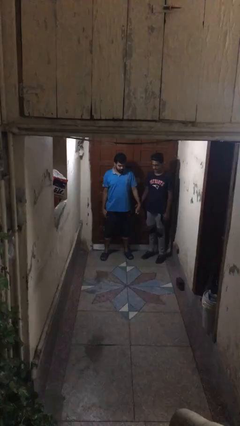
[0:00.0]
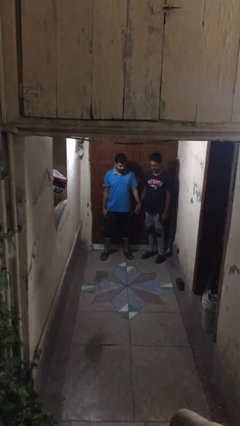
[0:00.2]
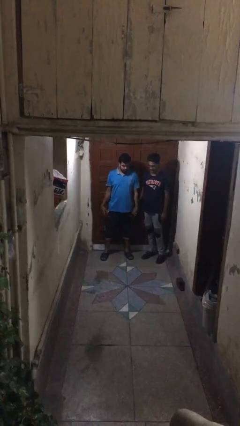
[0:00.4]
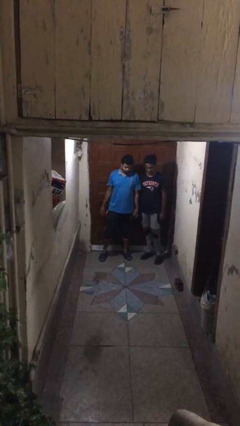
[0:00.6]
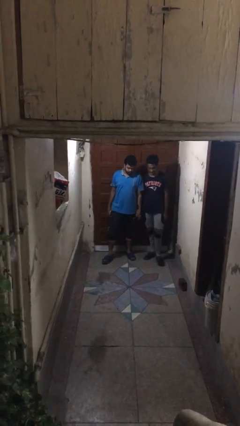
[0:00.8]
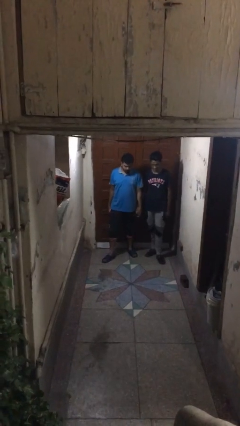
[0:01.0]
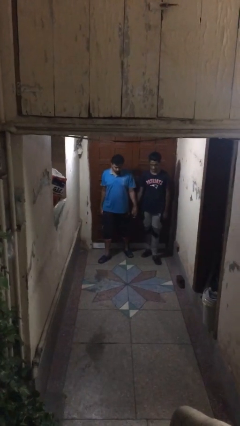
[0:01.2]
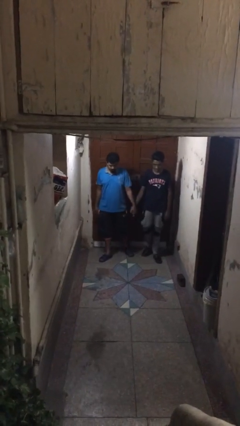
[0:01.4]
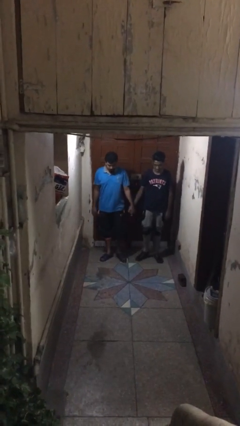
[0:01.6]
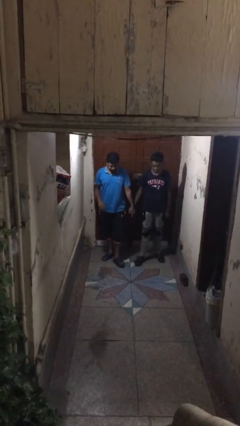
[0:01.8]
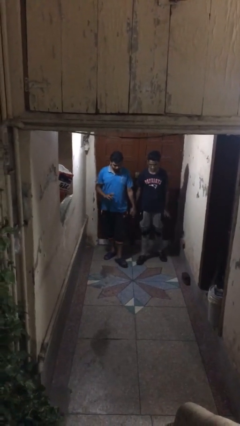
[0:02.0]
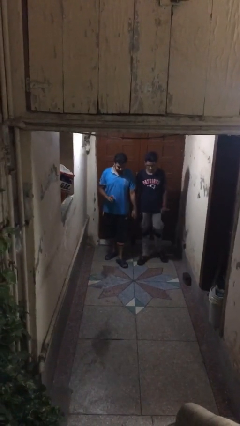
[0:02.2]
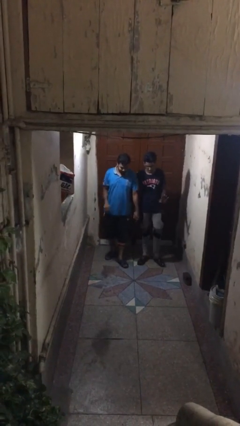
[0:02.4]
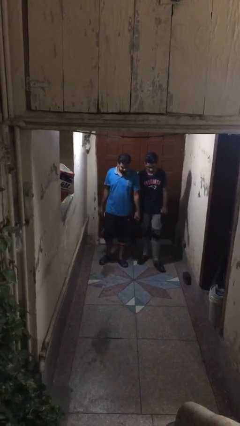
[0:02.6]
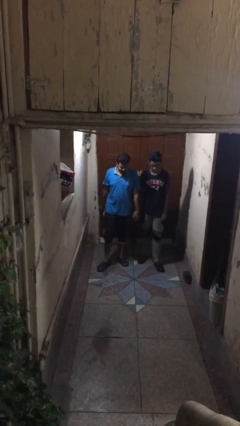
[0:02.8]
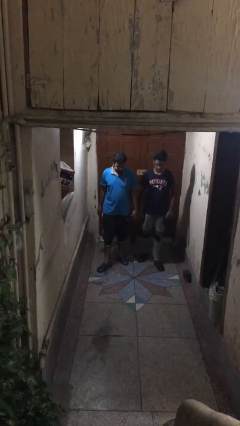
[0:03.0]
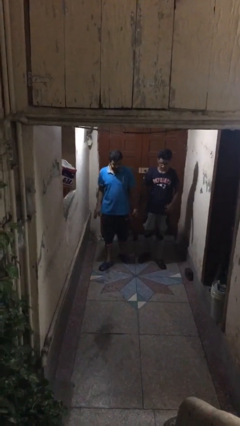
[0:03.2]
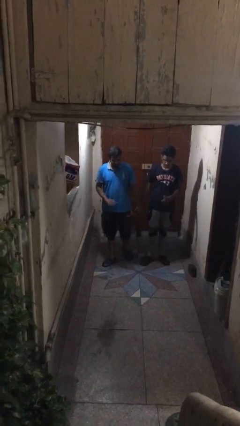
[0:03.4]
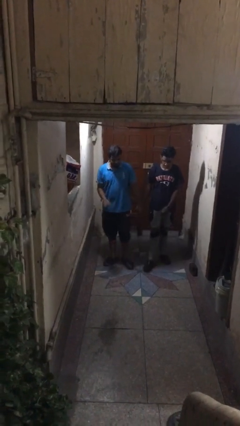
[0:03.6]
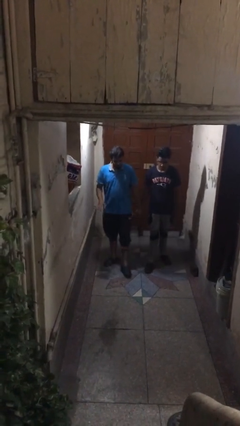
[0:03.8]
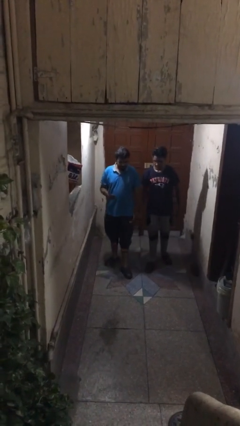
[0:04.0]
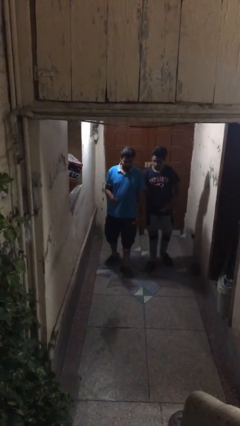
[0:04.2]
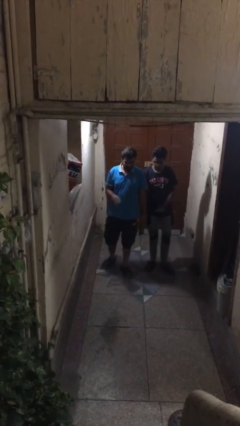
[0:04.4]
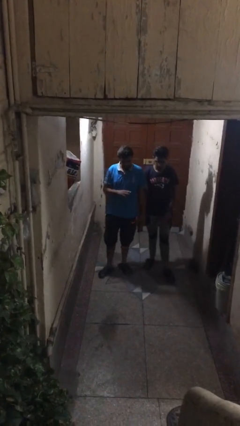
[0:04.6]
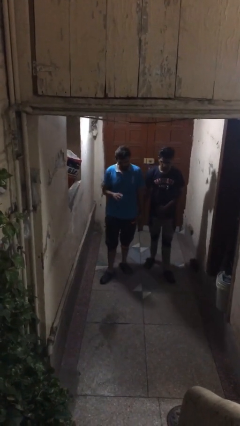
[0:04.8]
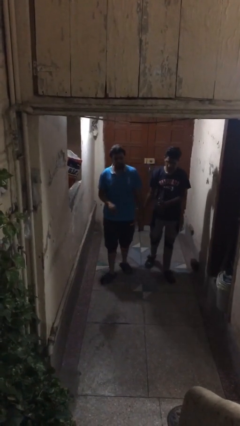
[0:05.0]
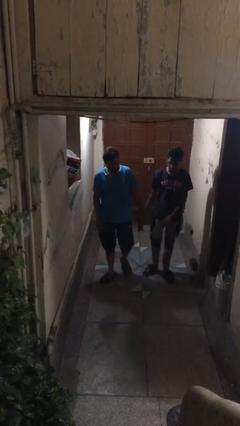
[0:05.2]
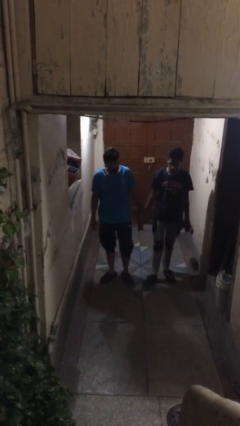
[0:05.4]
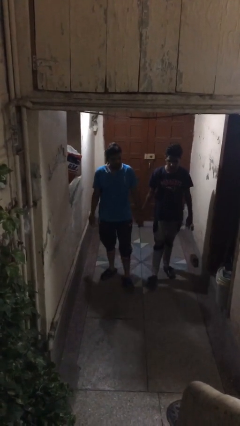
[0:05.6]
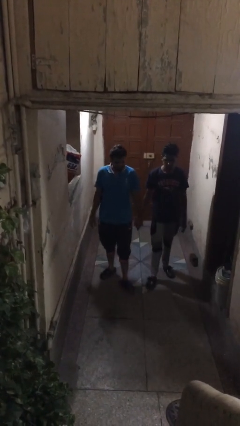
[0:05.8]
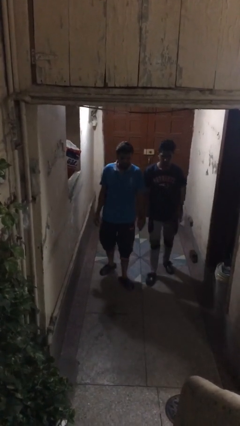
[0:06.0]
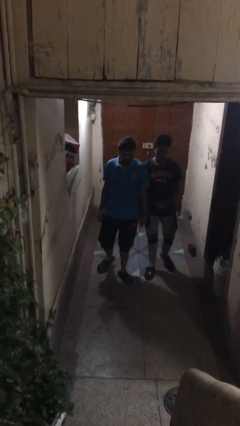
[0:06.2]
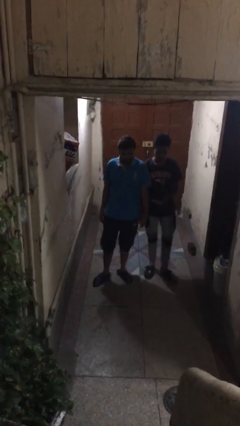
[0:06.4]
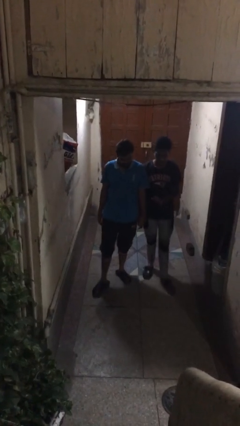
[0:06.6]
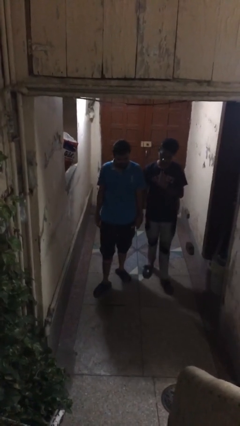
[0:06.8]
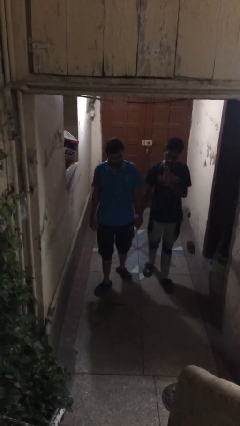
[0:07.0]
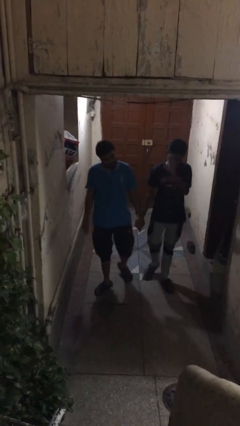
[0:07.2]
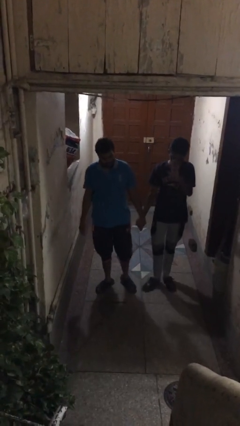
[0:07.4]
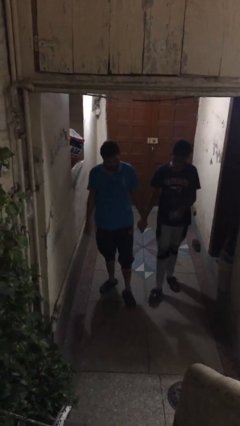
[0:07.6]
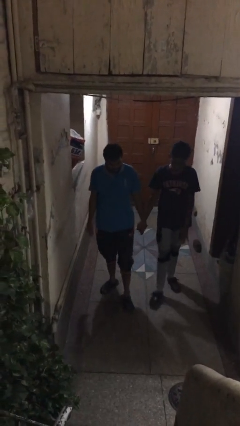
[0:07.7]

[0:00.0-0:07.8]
person holds hand

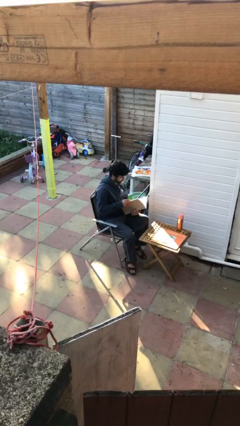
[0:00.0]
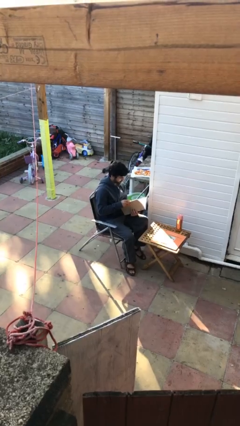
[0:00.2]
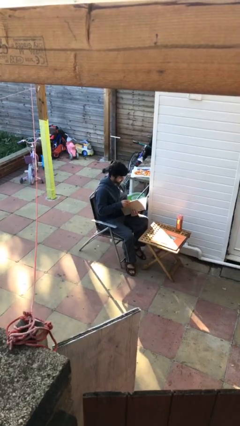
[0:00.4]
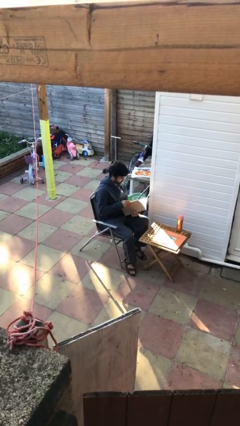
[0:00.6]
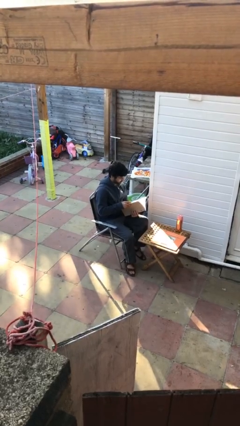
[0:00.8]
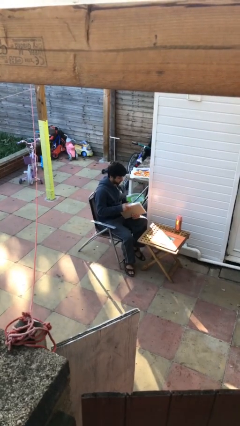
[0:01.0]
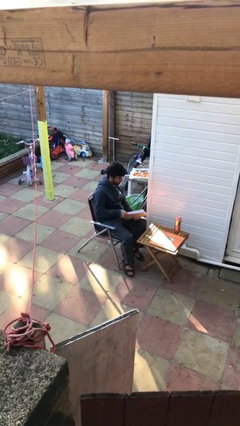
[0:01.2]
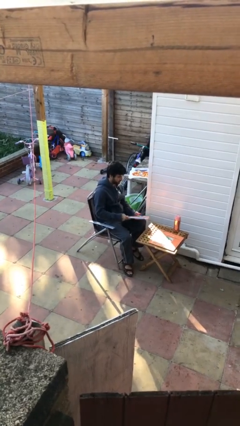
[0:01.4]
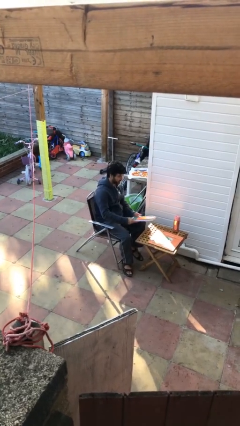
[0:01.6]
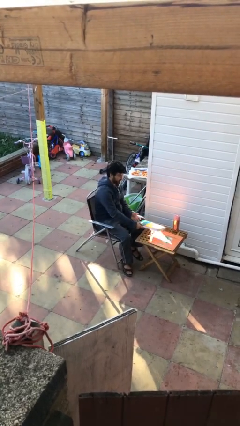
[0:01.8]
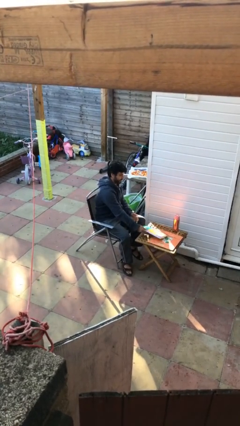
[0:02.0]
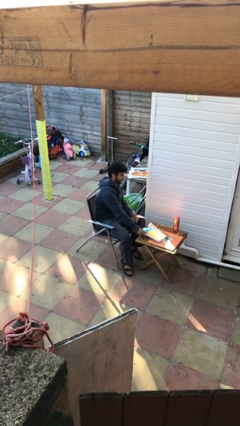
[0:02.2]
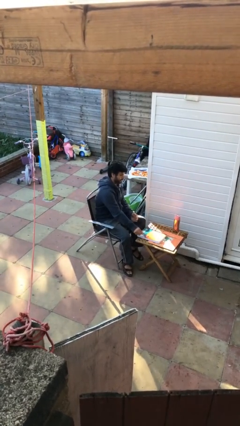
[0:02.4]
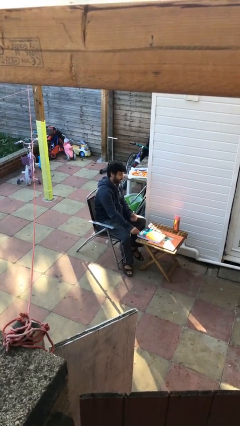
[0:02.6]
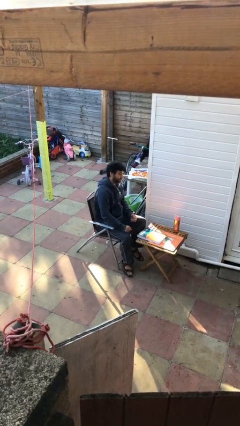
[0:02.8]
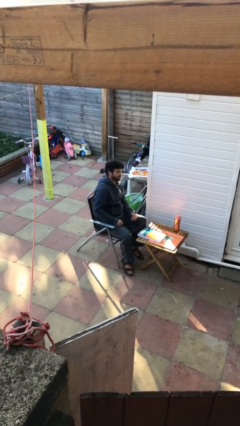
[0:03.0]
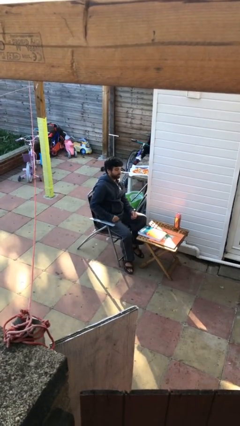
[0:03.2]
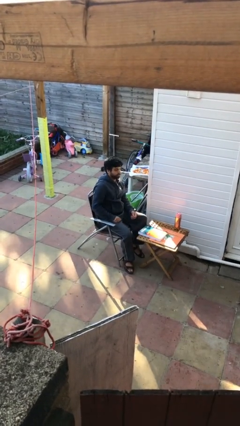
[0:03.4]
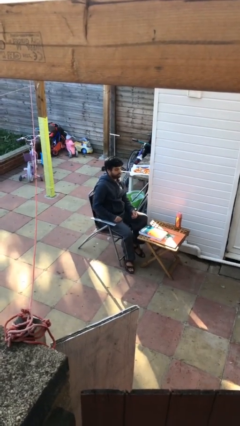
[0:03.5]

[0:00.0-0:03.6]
person puts down object on table

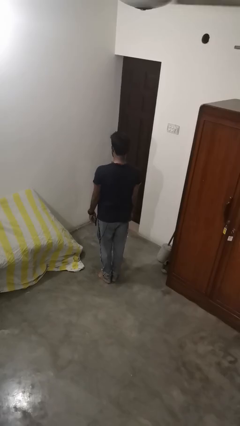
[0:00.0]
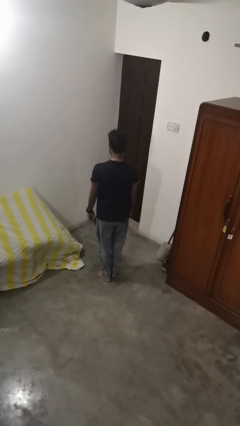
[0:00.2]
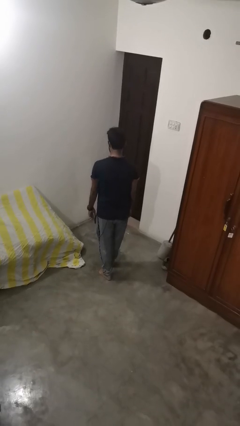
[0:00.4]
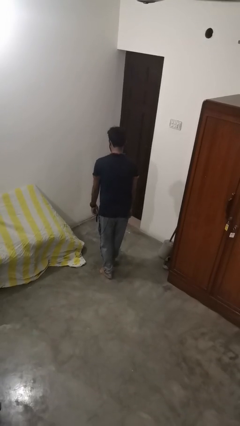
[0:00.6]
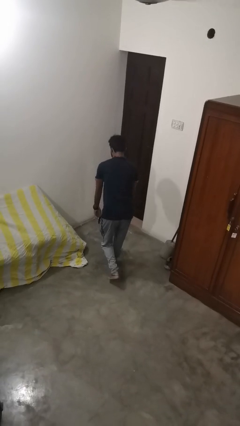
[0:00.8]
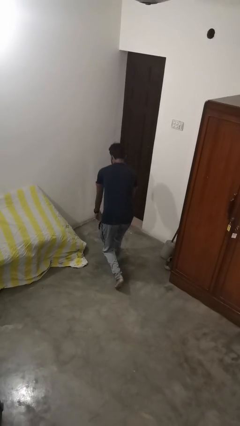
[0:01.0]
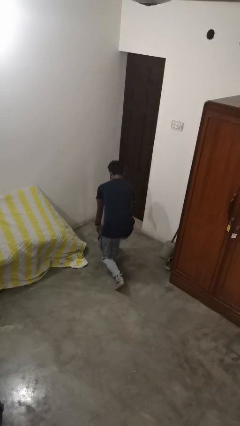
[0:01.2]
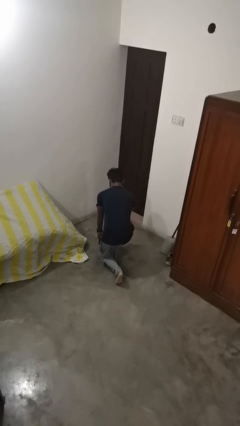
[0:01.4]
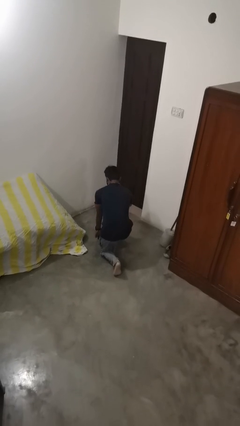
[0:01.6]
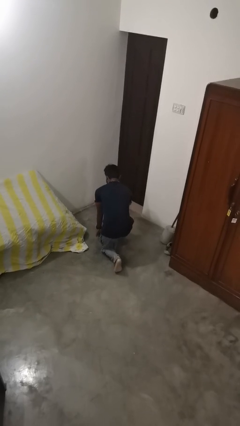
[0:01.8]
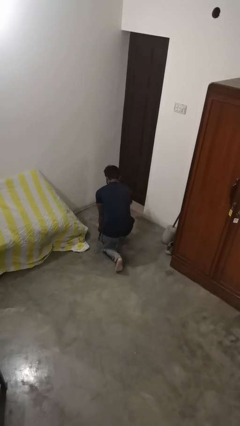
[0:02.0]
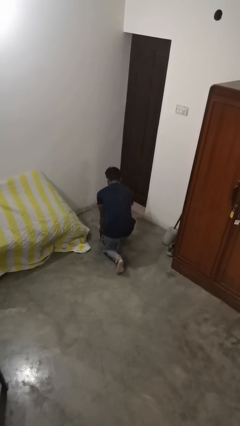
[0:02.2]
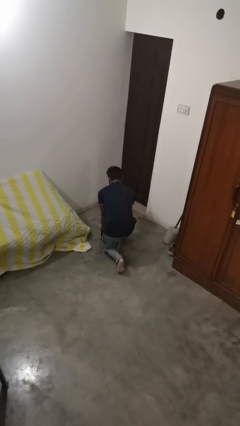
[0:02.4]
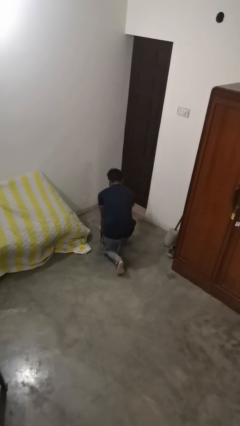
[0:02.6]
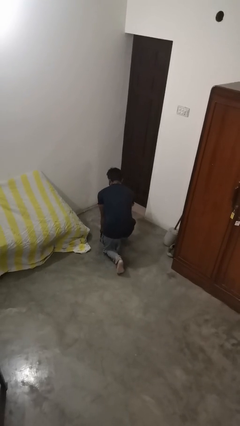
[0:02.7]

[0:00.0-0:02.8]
person kneels

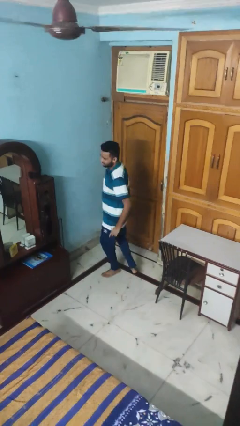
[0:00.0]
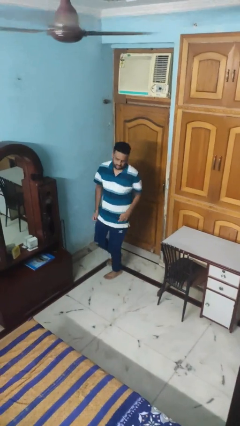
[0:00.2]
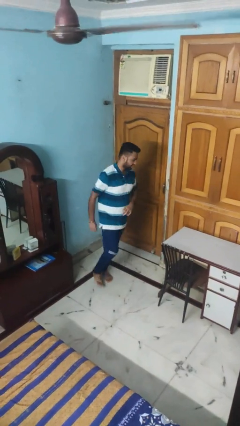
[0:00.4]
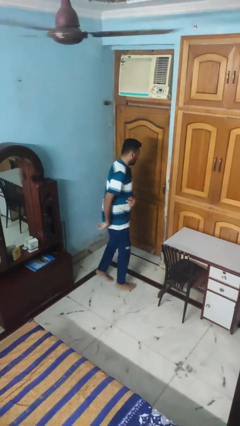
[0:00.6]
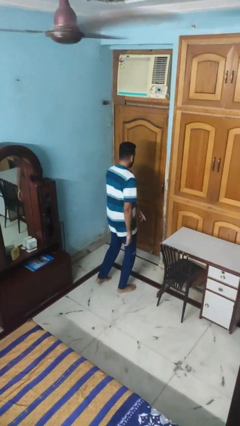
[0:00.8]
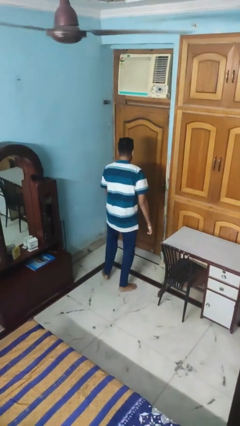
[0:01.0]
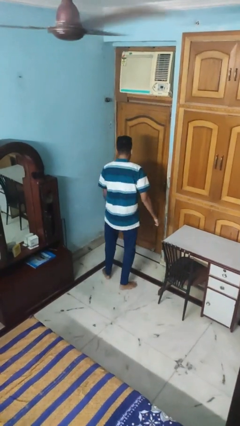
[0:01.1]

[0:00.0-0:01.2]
person twirls

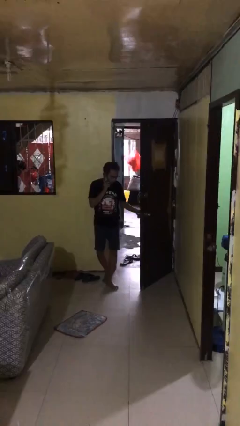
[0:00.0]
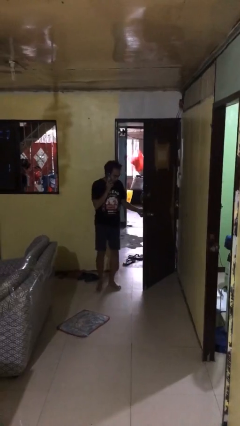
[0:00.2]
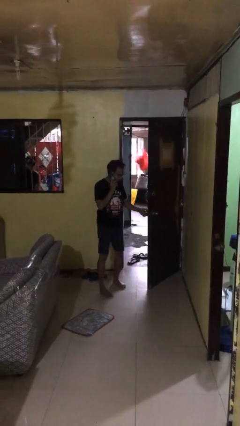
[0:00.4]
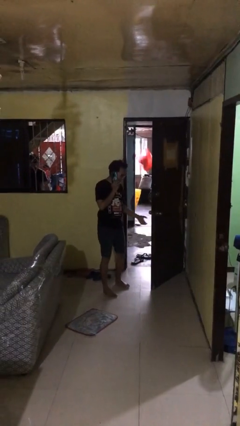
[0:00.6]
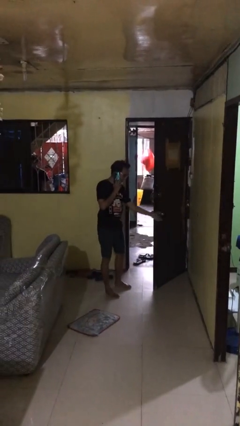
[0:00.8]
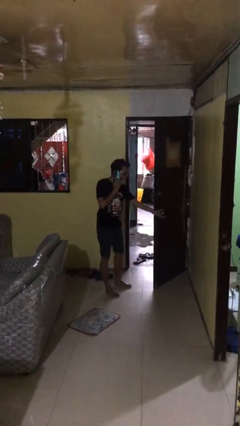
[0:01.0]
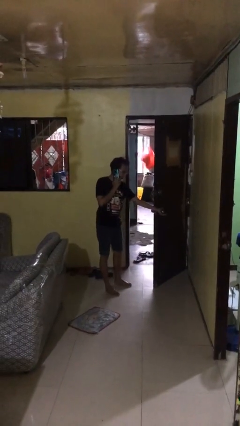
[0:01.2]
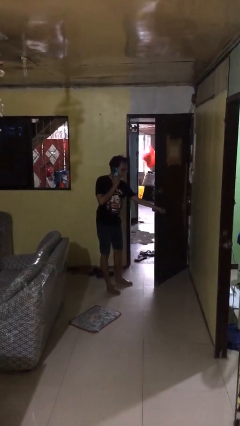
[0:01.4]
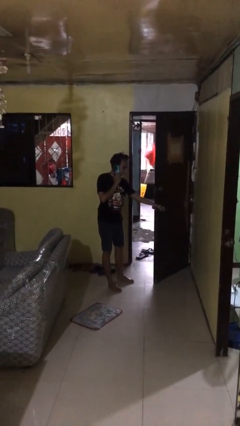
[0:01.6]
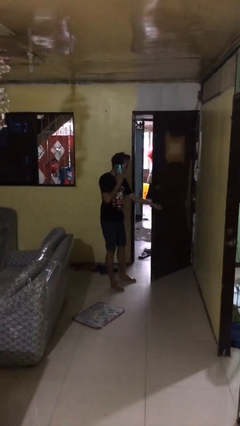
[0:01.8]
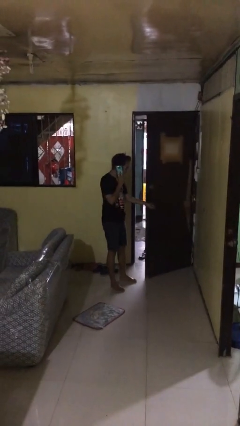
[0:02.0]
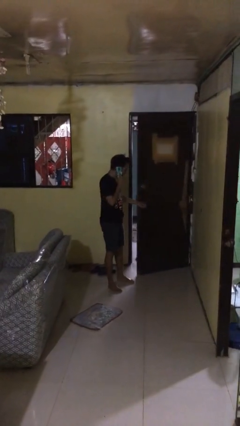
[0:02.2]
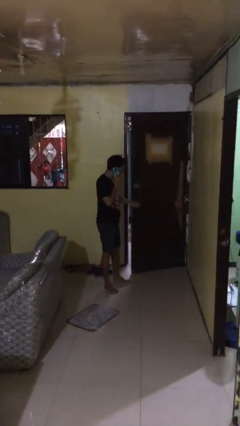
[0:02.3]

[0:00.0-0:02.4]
person enters scene through structure
